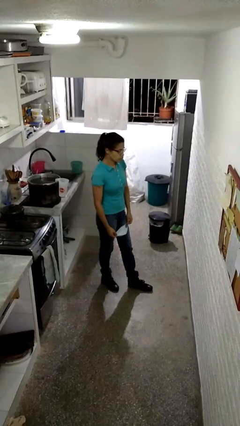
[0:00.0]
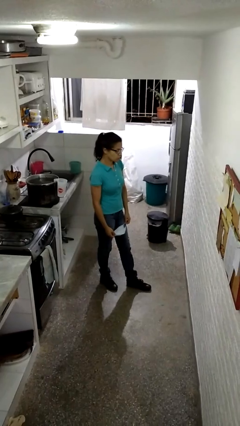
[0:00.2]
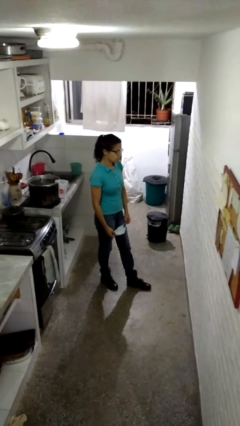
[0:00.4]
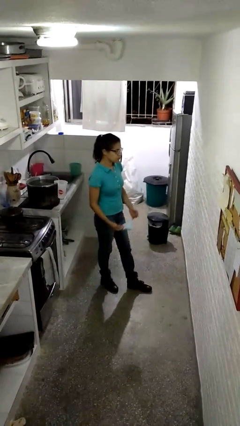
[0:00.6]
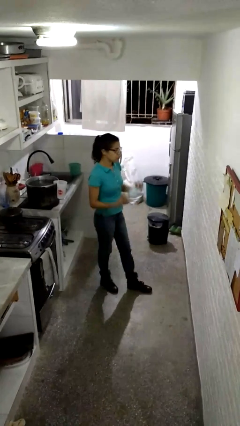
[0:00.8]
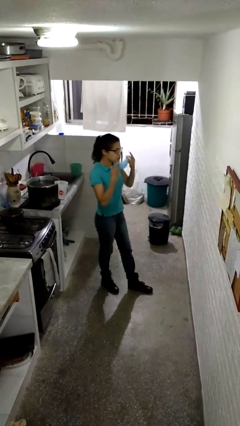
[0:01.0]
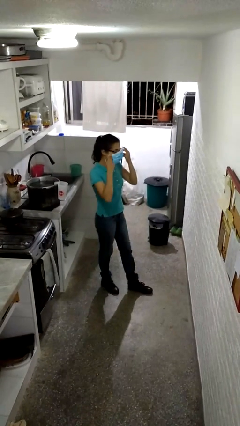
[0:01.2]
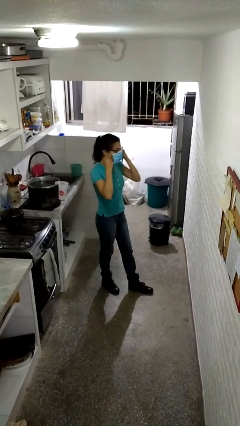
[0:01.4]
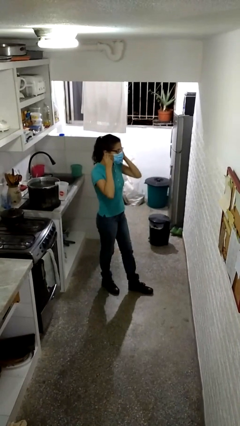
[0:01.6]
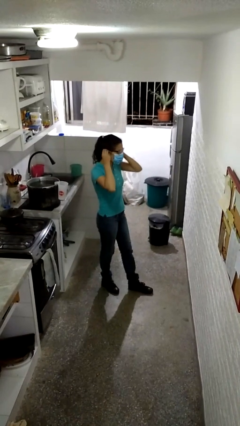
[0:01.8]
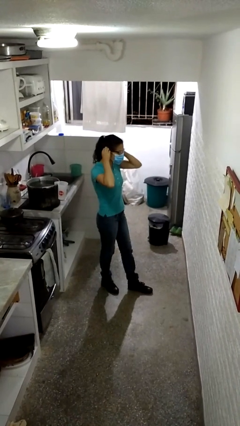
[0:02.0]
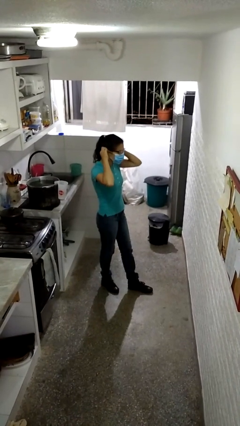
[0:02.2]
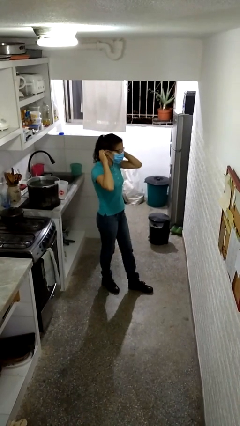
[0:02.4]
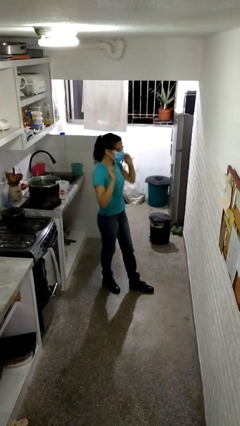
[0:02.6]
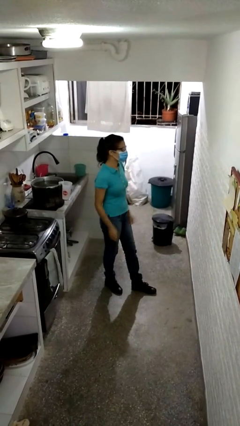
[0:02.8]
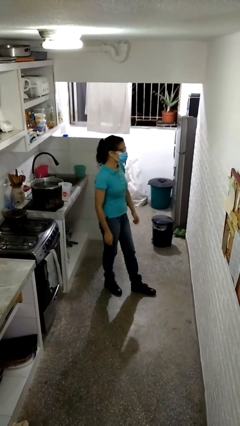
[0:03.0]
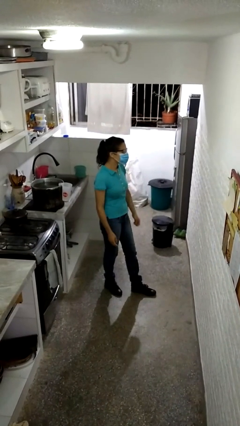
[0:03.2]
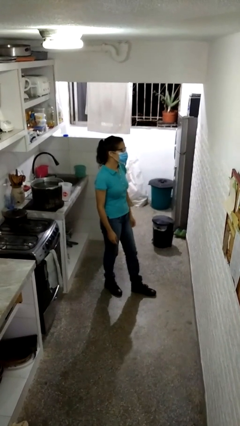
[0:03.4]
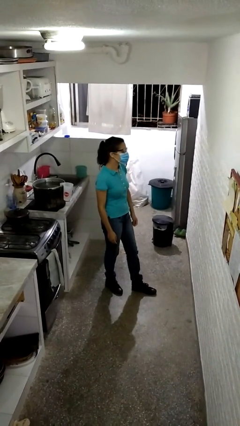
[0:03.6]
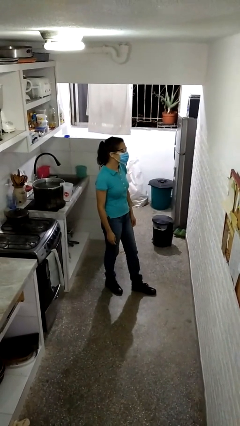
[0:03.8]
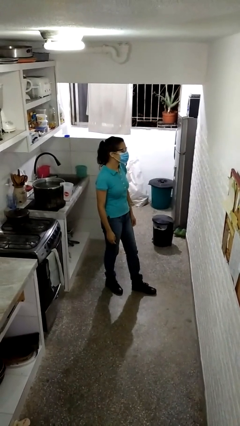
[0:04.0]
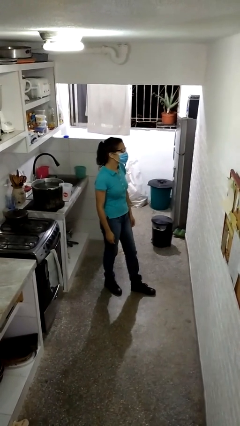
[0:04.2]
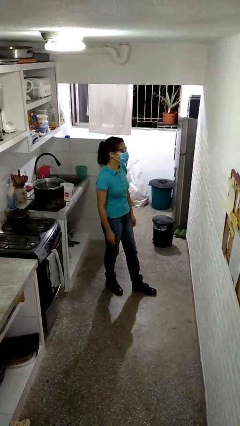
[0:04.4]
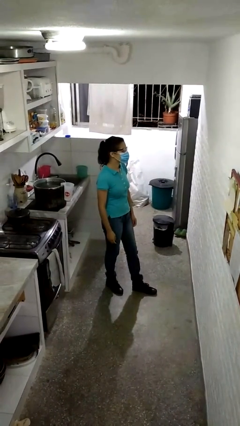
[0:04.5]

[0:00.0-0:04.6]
person puts on facemask

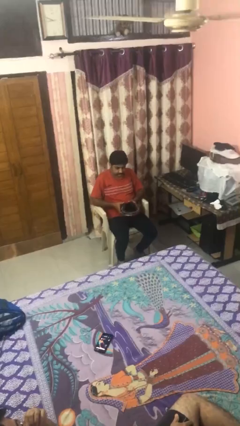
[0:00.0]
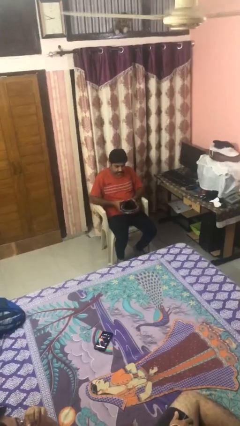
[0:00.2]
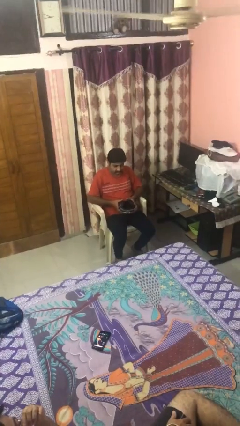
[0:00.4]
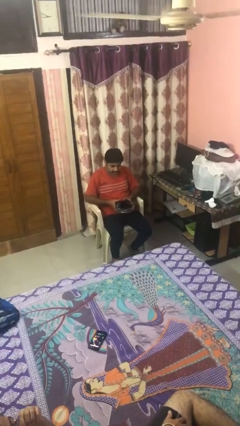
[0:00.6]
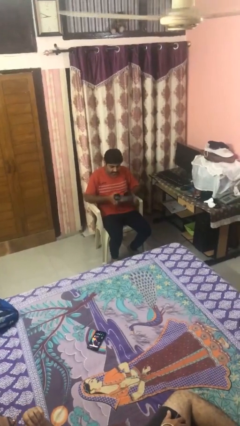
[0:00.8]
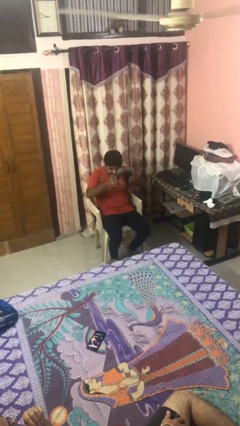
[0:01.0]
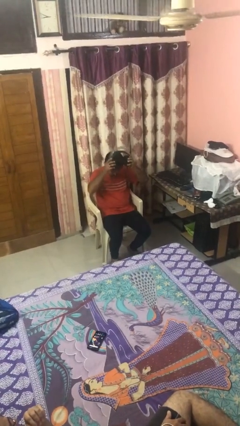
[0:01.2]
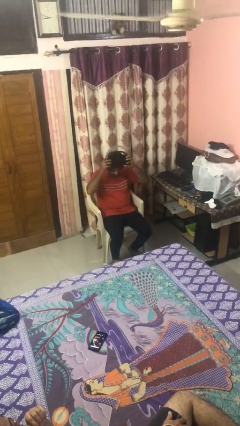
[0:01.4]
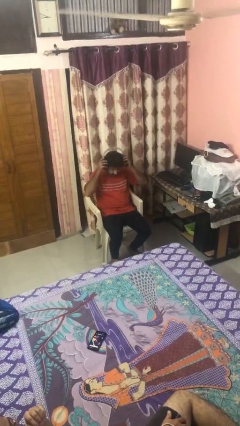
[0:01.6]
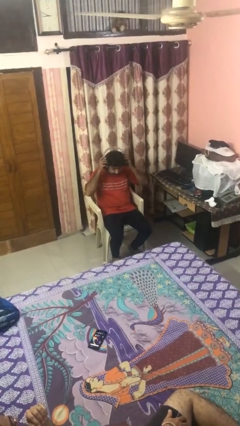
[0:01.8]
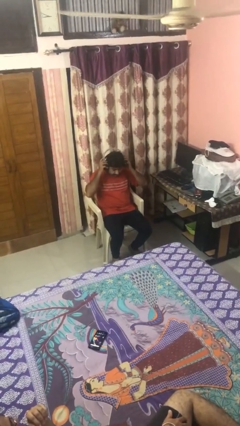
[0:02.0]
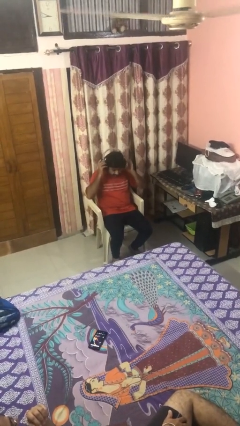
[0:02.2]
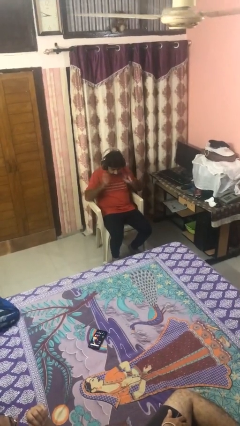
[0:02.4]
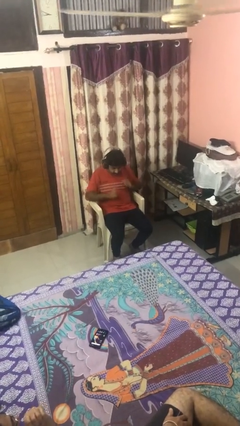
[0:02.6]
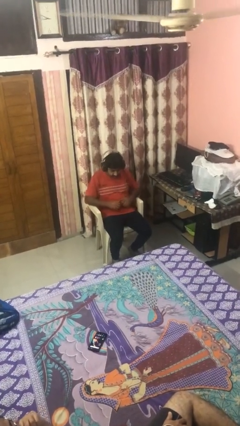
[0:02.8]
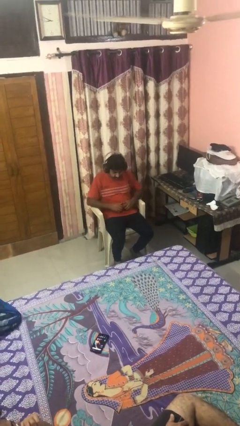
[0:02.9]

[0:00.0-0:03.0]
person puts on headphones

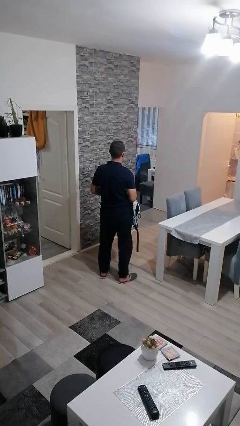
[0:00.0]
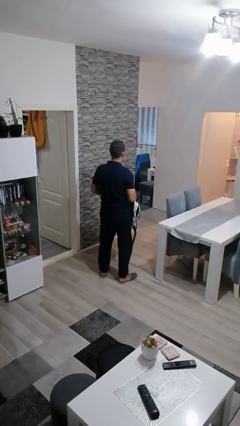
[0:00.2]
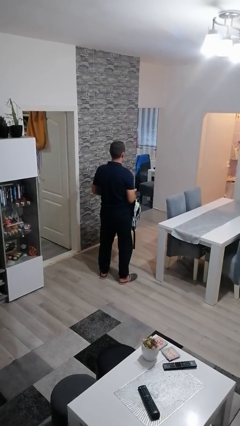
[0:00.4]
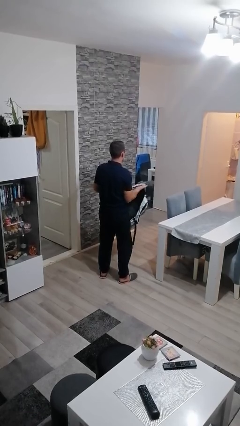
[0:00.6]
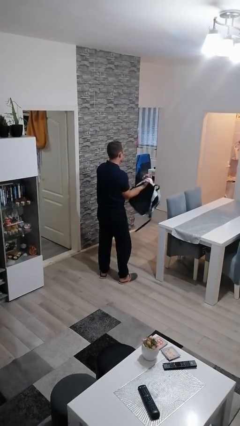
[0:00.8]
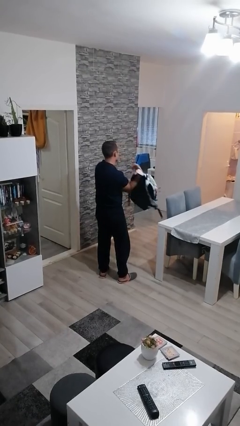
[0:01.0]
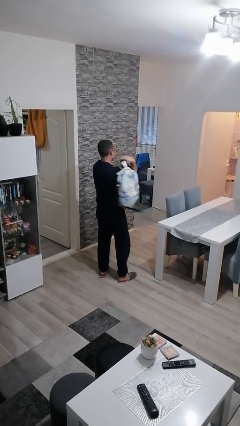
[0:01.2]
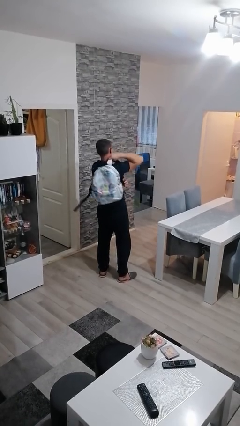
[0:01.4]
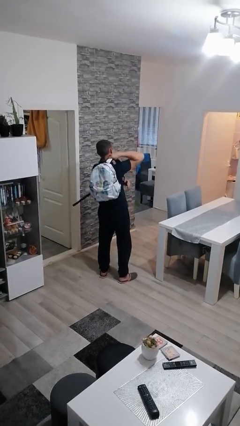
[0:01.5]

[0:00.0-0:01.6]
person puts on backpack

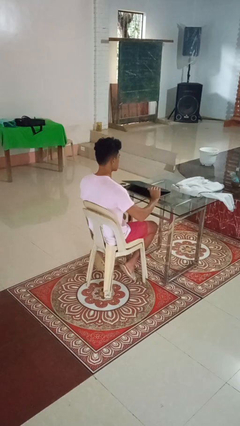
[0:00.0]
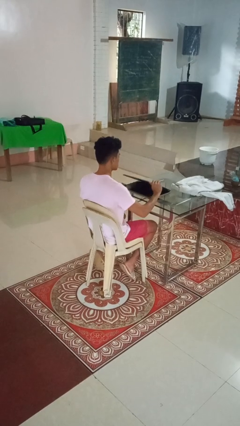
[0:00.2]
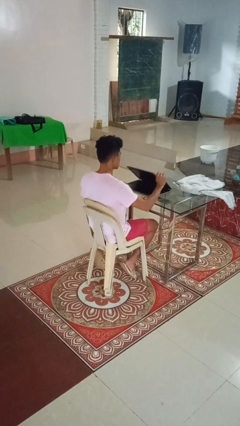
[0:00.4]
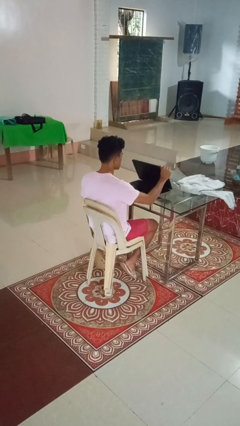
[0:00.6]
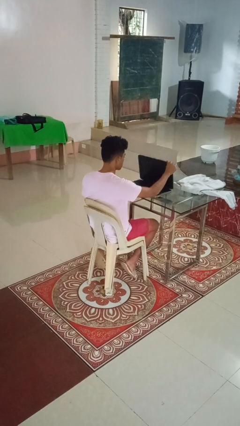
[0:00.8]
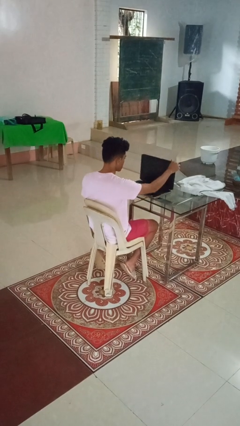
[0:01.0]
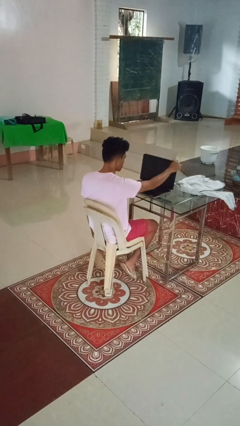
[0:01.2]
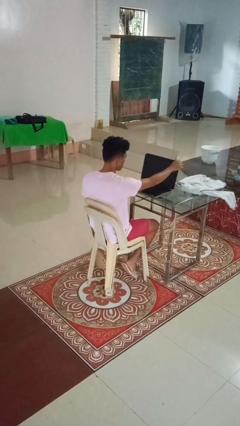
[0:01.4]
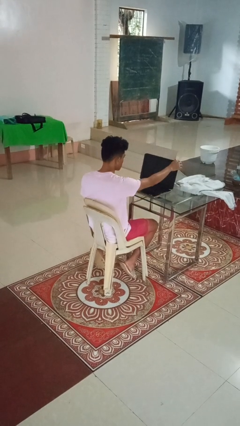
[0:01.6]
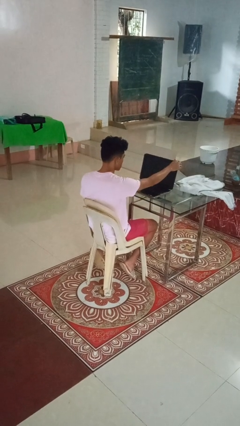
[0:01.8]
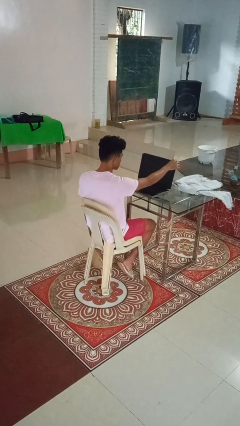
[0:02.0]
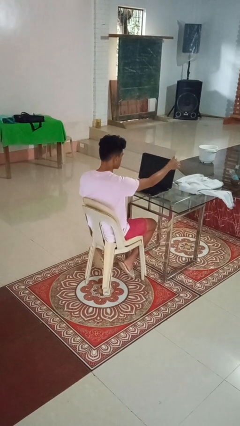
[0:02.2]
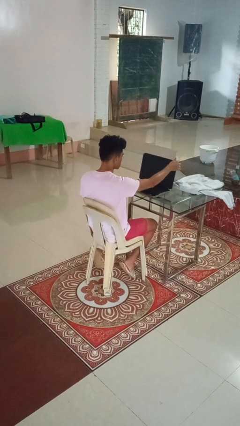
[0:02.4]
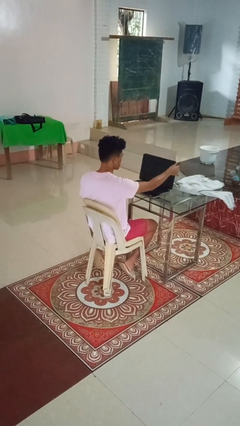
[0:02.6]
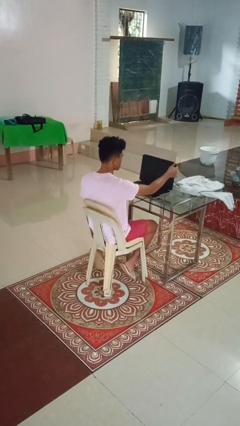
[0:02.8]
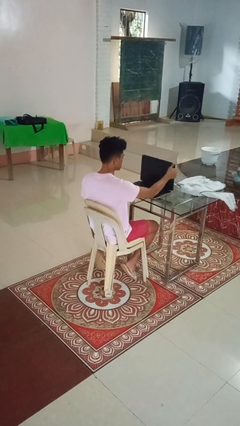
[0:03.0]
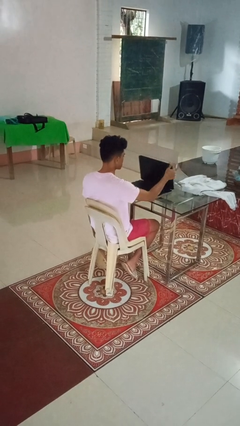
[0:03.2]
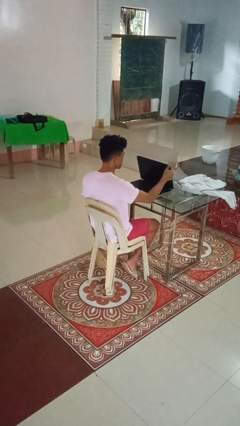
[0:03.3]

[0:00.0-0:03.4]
person opens laptop

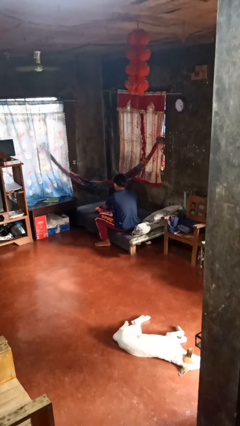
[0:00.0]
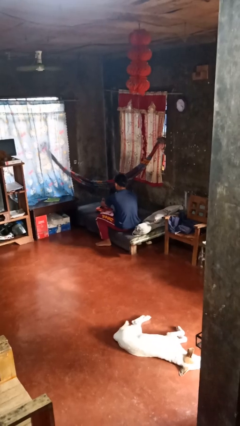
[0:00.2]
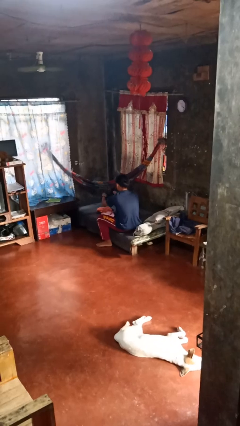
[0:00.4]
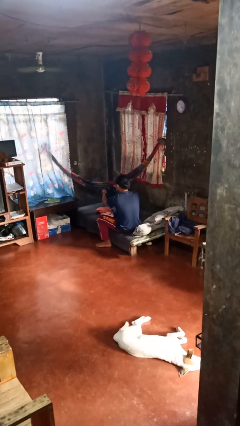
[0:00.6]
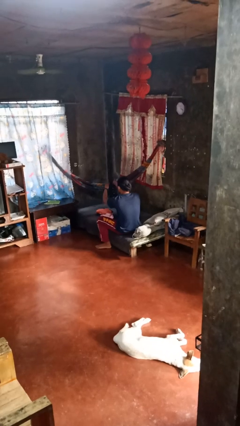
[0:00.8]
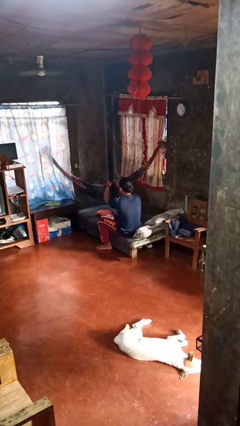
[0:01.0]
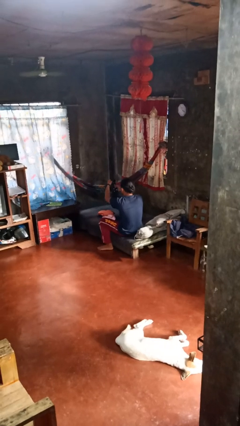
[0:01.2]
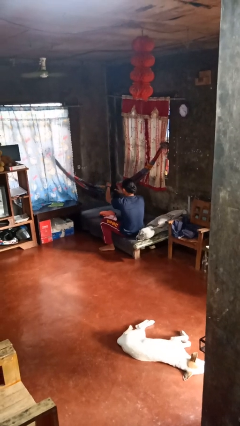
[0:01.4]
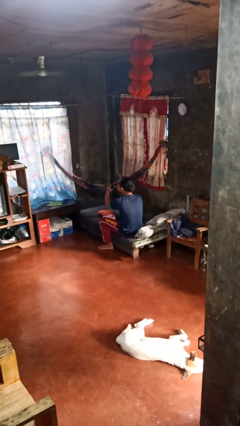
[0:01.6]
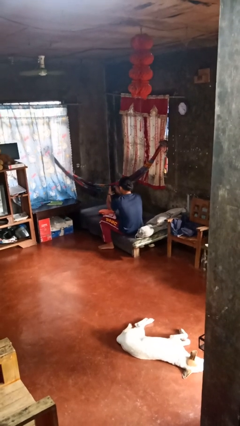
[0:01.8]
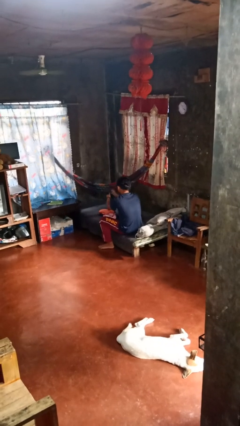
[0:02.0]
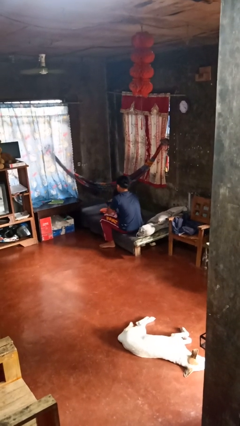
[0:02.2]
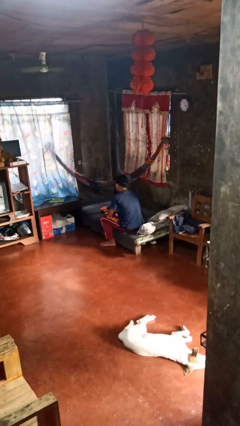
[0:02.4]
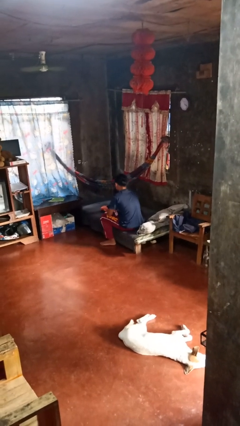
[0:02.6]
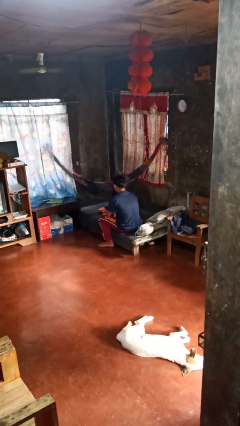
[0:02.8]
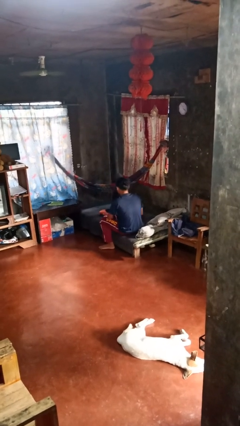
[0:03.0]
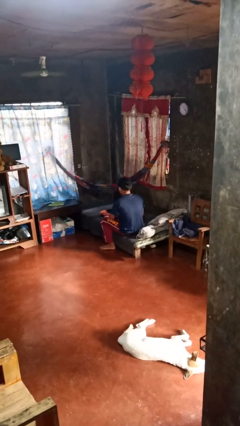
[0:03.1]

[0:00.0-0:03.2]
person folds socks

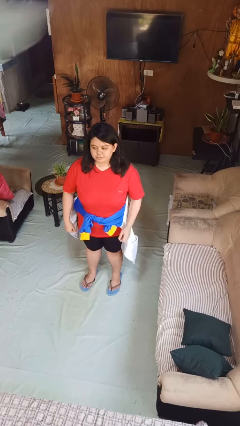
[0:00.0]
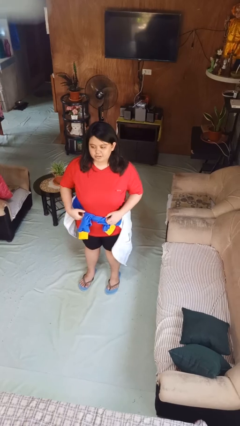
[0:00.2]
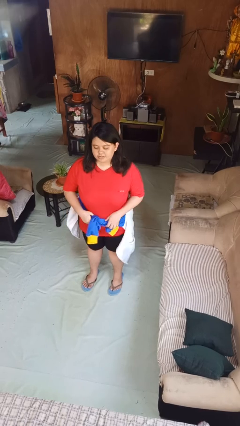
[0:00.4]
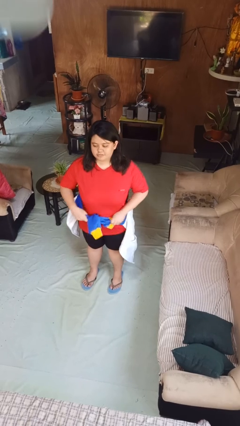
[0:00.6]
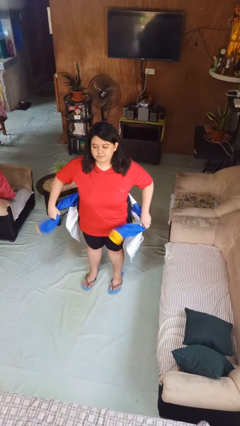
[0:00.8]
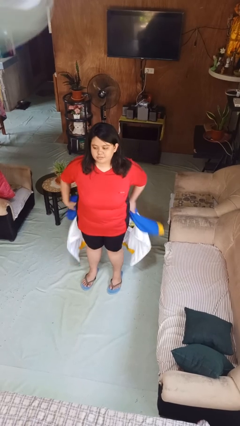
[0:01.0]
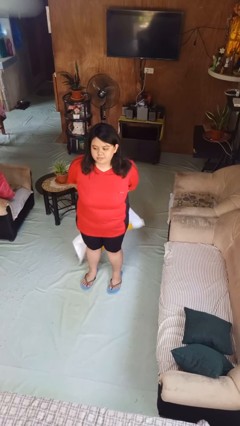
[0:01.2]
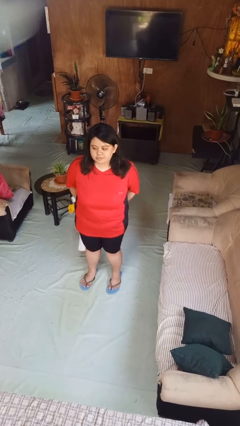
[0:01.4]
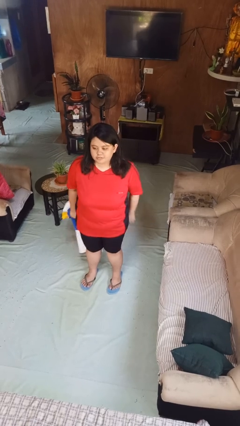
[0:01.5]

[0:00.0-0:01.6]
person unties jacket around waist

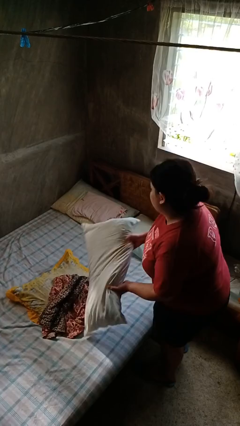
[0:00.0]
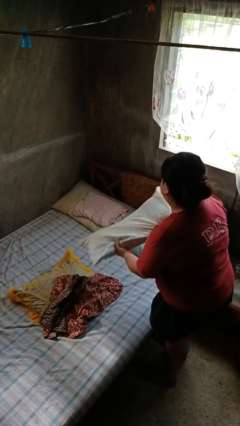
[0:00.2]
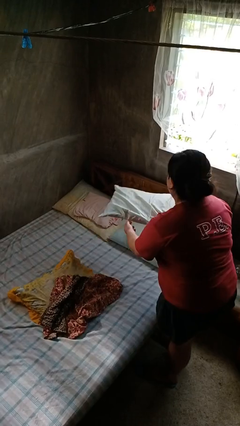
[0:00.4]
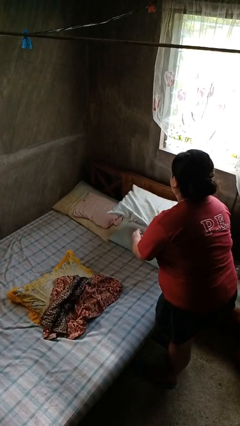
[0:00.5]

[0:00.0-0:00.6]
person makes bed
